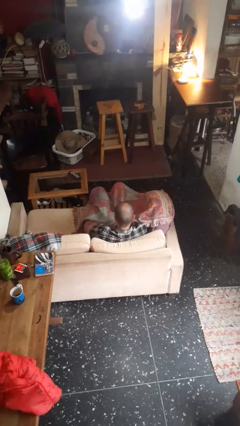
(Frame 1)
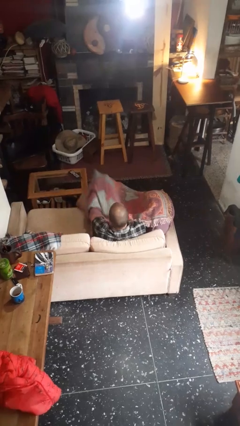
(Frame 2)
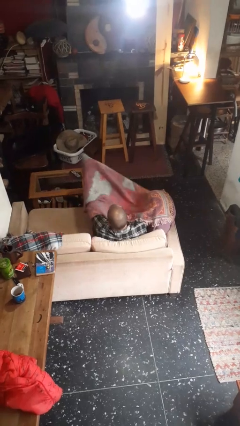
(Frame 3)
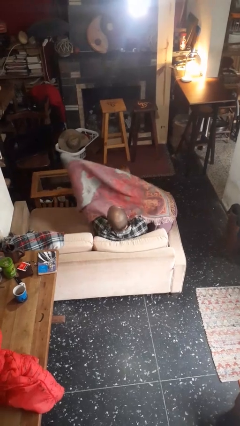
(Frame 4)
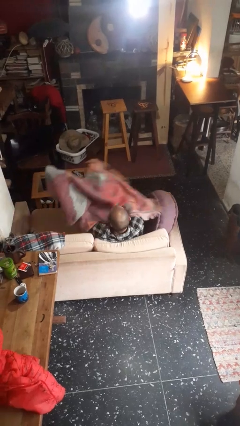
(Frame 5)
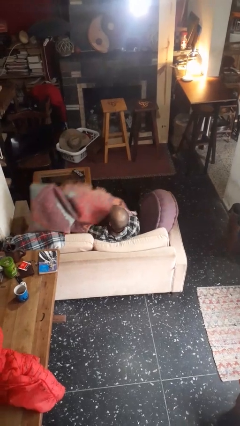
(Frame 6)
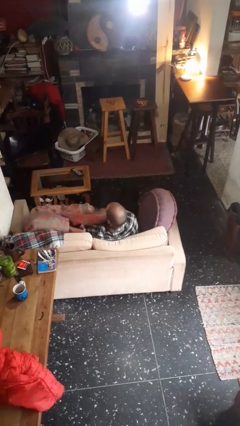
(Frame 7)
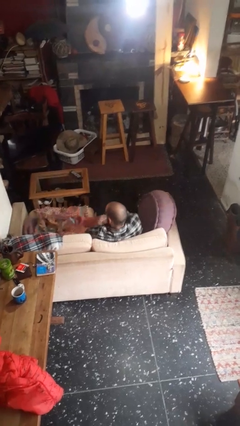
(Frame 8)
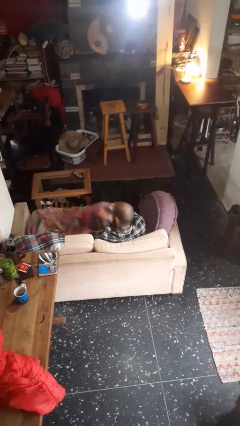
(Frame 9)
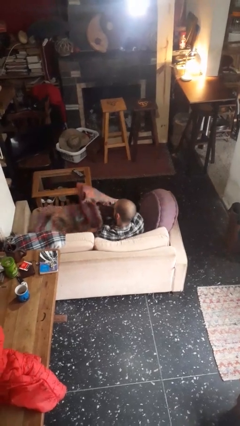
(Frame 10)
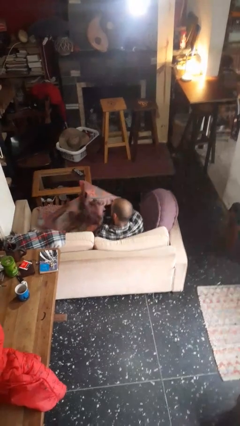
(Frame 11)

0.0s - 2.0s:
person uncovers with blanket

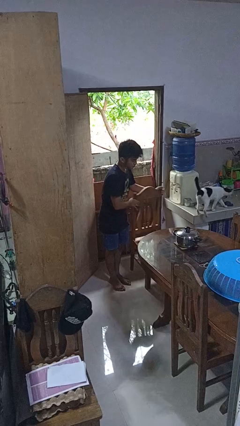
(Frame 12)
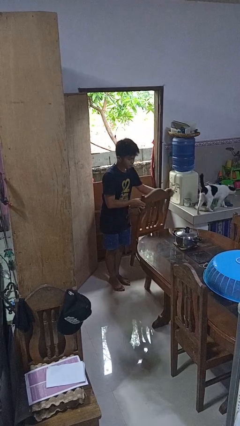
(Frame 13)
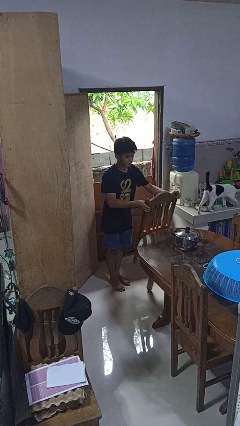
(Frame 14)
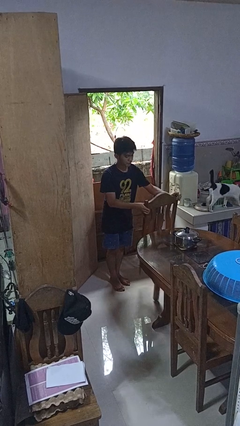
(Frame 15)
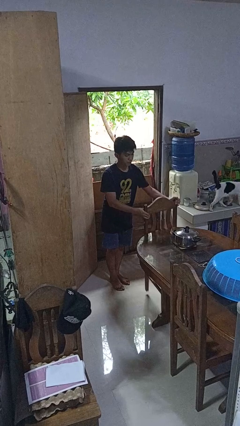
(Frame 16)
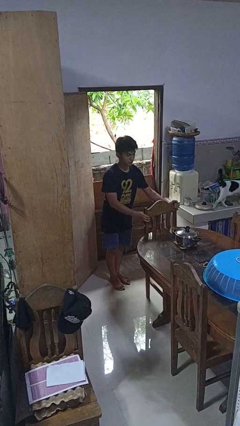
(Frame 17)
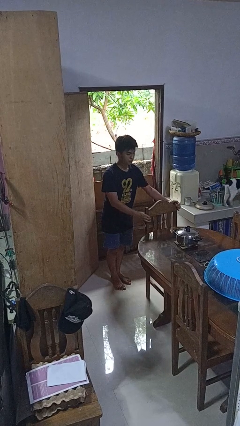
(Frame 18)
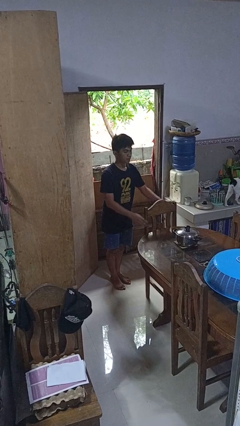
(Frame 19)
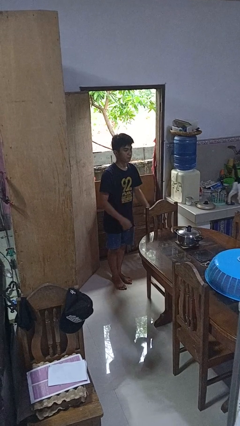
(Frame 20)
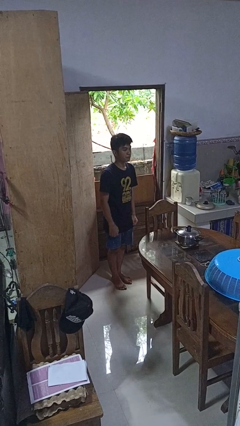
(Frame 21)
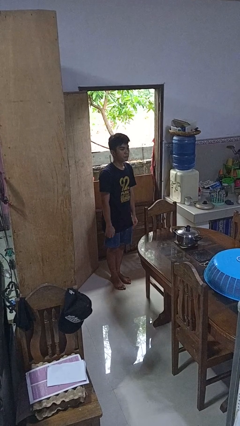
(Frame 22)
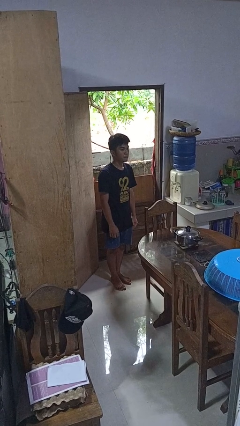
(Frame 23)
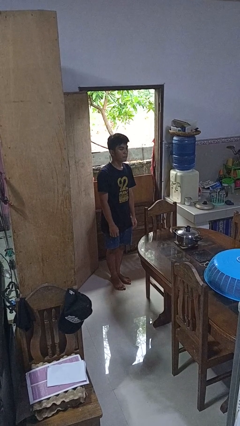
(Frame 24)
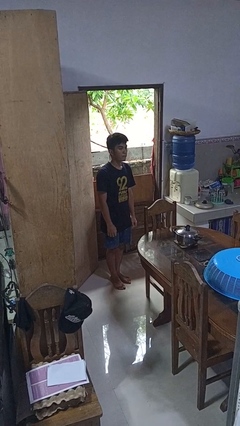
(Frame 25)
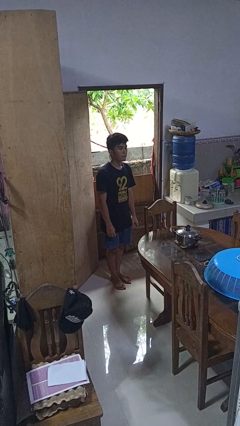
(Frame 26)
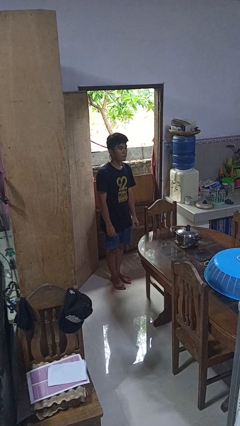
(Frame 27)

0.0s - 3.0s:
person pushes in chair

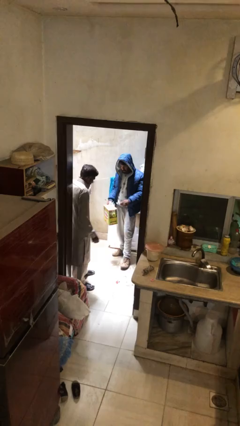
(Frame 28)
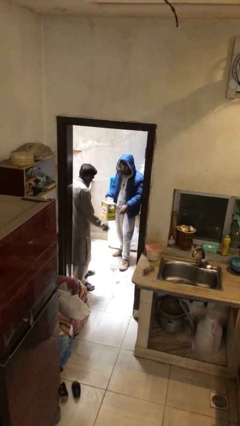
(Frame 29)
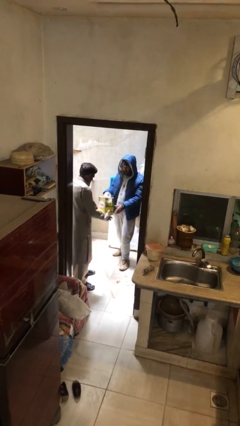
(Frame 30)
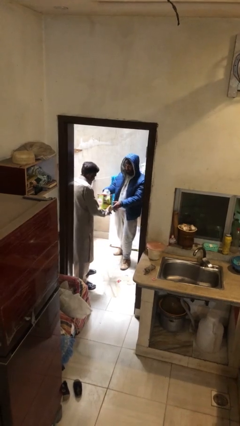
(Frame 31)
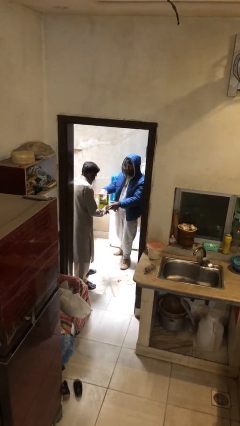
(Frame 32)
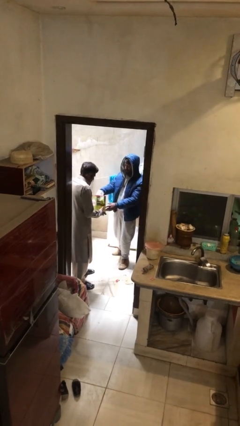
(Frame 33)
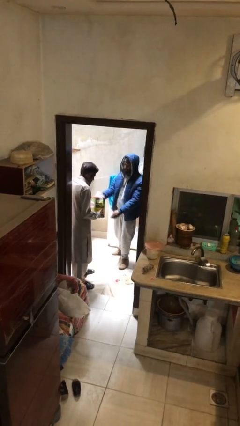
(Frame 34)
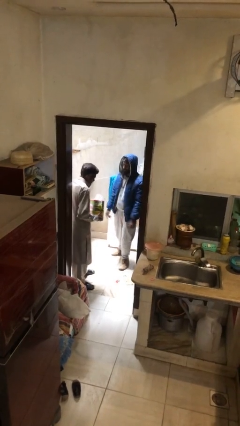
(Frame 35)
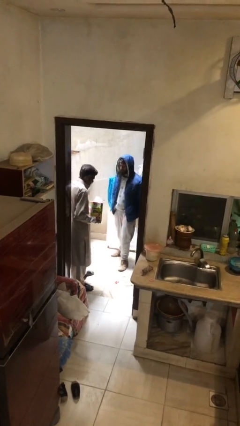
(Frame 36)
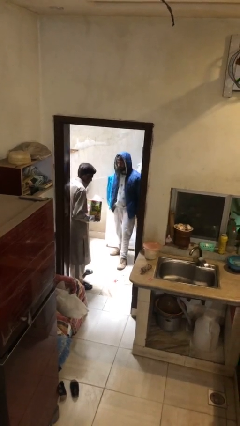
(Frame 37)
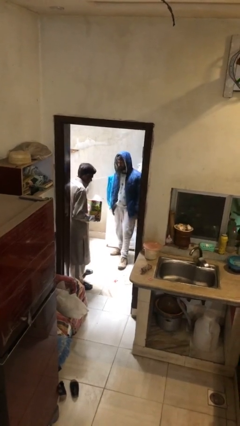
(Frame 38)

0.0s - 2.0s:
person transfers object to person

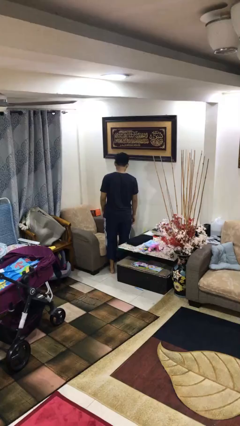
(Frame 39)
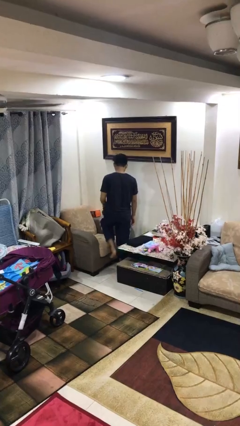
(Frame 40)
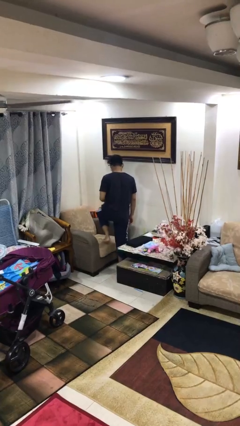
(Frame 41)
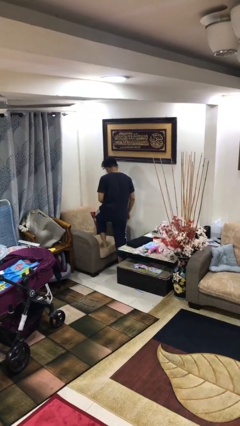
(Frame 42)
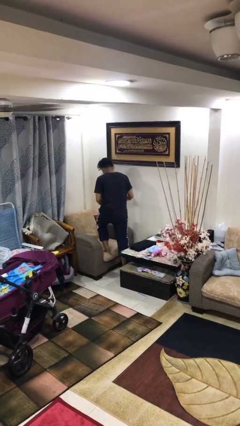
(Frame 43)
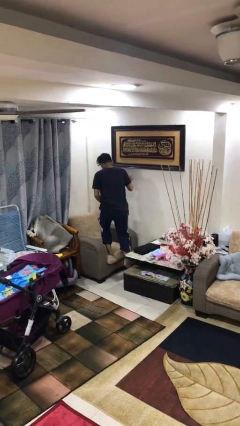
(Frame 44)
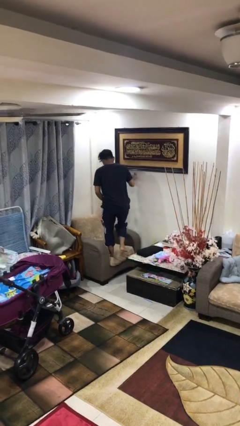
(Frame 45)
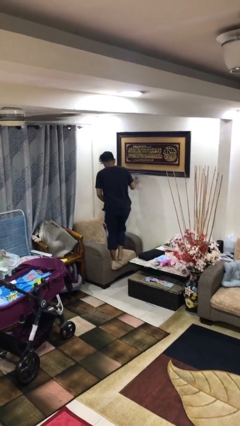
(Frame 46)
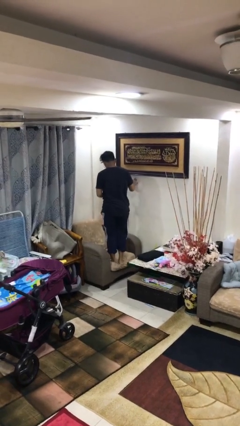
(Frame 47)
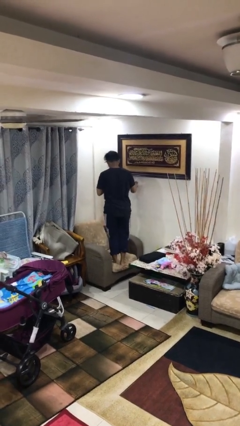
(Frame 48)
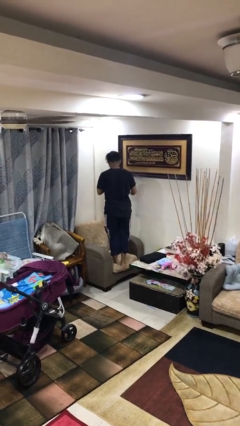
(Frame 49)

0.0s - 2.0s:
person climbs on couch

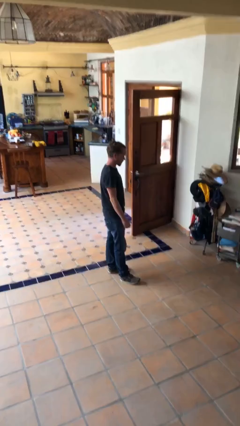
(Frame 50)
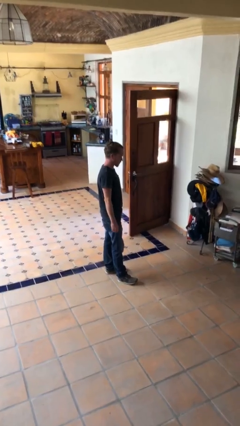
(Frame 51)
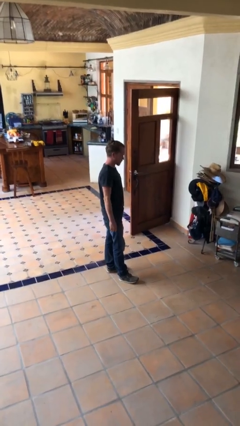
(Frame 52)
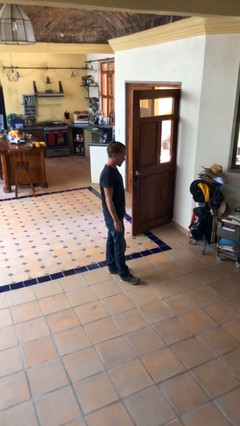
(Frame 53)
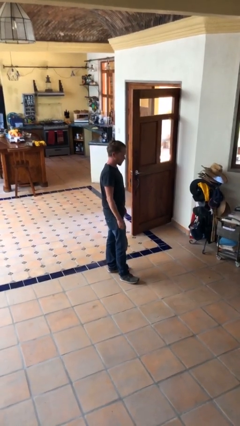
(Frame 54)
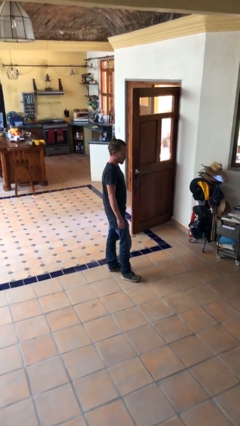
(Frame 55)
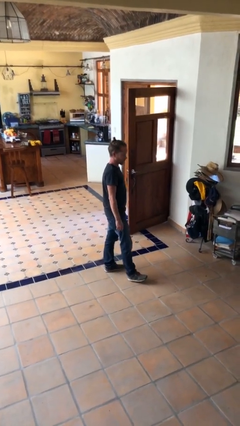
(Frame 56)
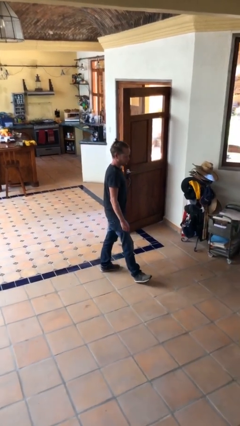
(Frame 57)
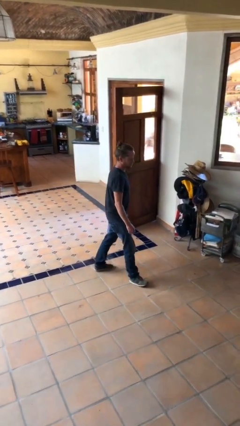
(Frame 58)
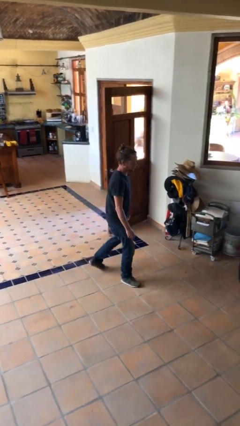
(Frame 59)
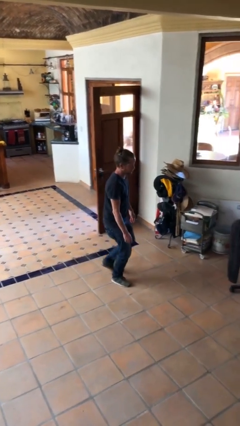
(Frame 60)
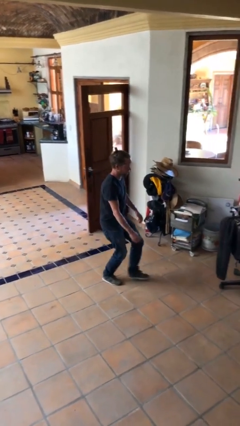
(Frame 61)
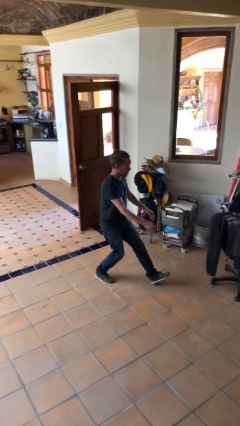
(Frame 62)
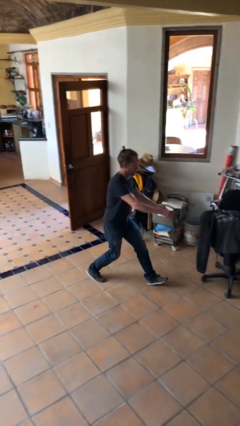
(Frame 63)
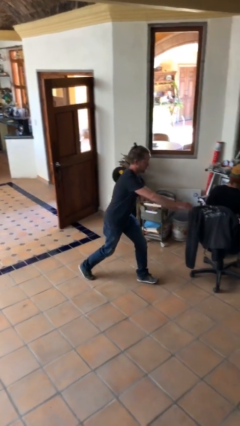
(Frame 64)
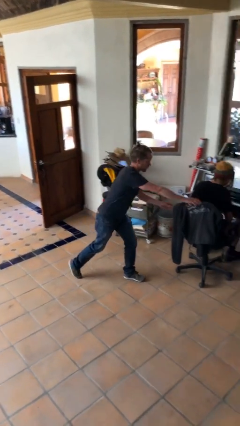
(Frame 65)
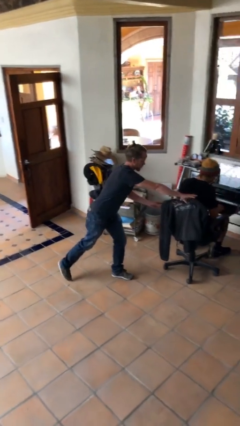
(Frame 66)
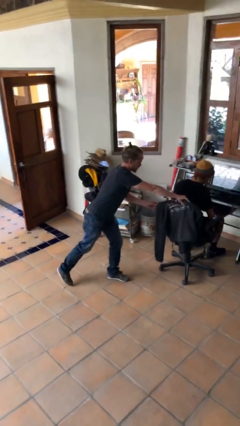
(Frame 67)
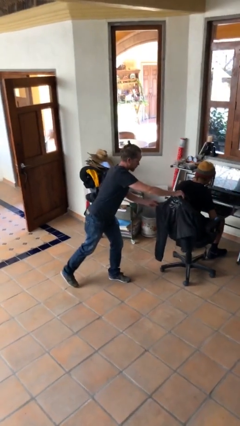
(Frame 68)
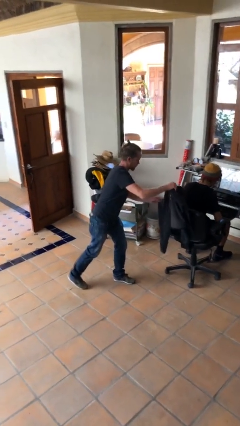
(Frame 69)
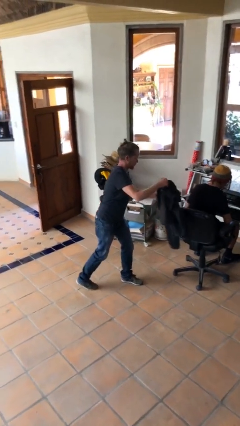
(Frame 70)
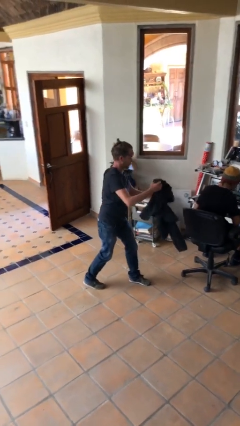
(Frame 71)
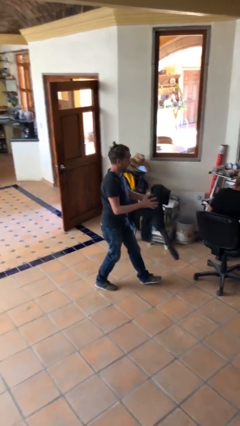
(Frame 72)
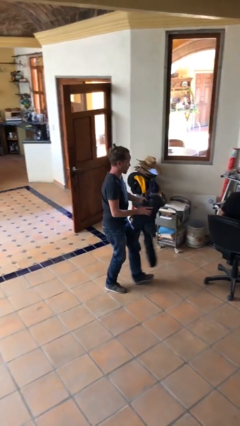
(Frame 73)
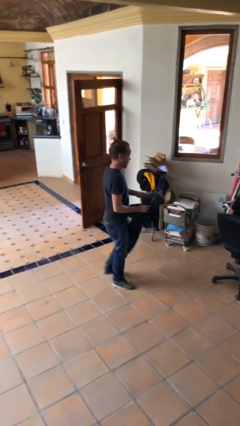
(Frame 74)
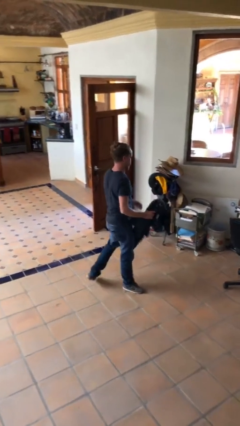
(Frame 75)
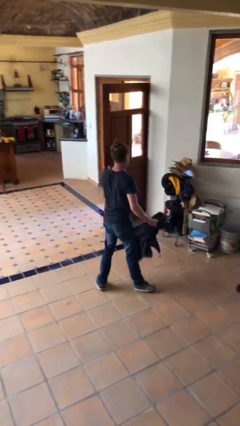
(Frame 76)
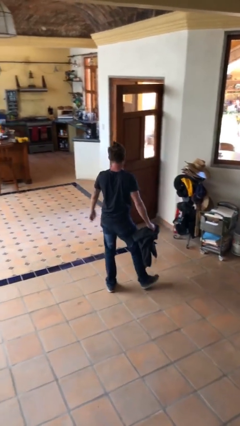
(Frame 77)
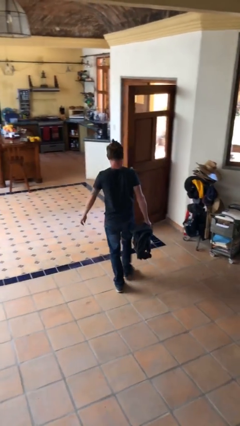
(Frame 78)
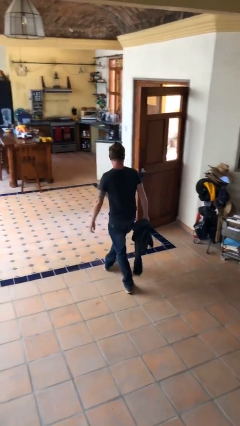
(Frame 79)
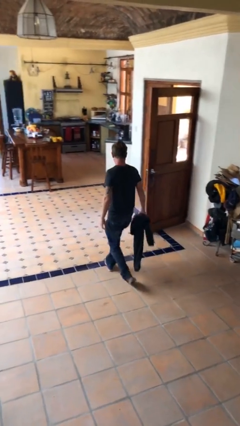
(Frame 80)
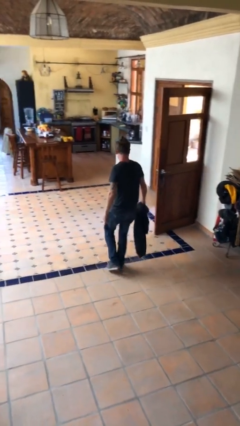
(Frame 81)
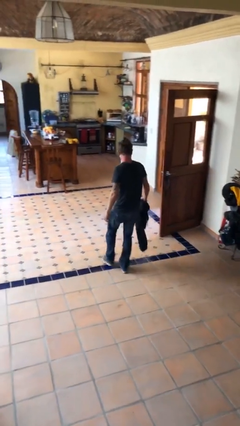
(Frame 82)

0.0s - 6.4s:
person steals object from person

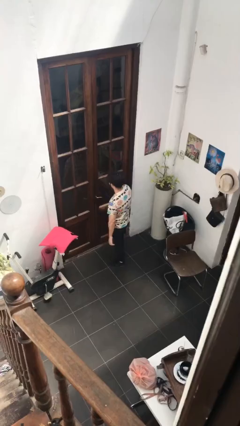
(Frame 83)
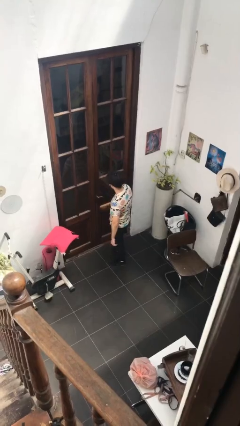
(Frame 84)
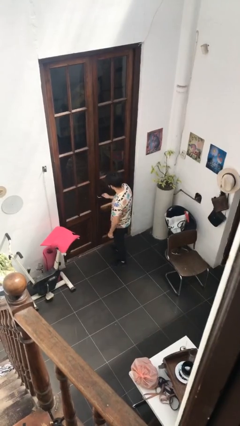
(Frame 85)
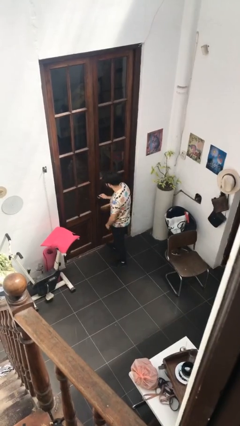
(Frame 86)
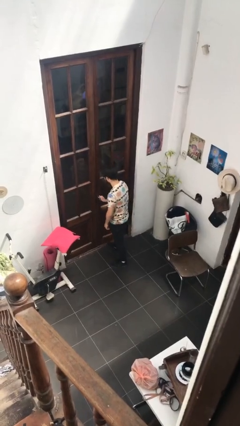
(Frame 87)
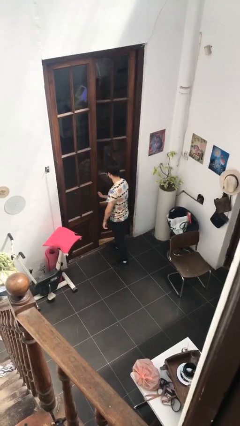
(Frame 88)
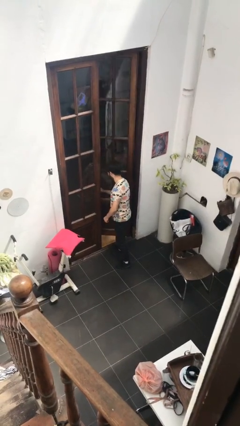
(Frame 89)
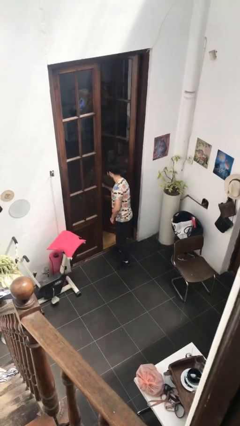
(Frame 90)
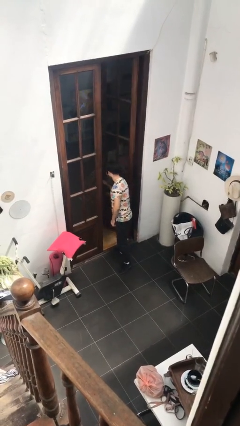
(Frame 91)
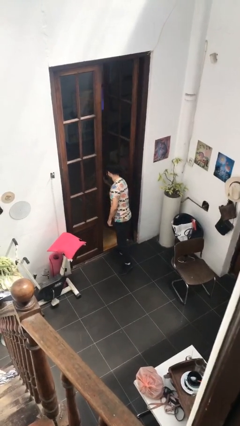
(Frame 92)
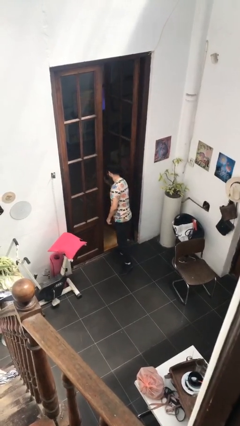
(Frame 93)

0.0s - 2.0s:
person opens facility door

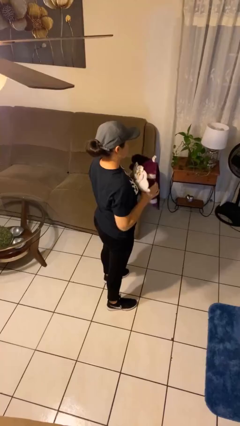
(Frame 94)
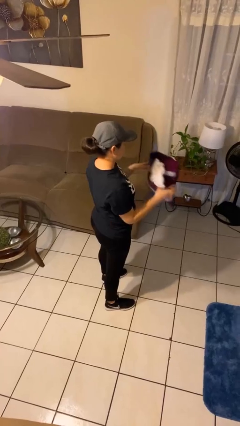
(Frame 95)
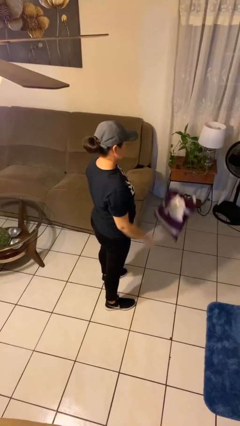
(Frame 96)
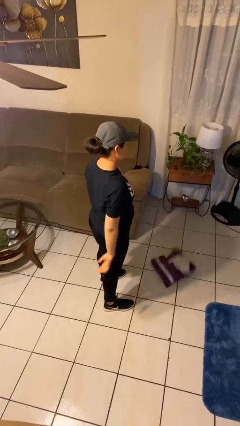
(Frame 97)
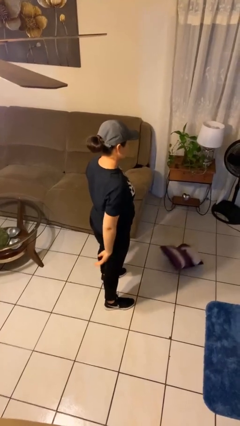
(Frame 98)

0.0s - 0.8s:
person throws object to ground
